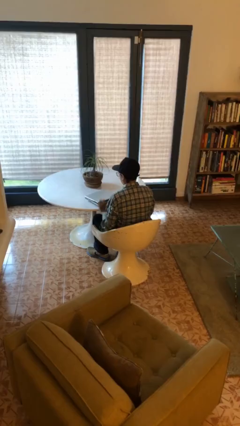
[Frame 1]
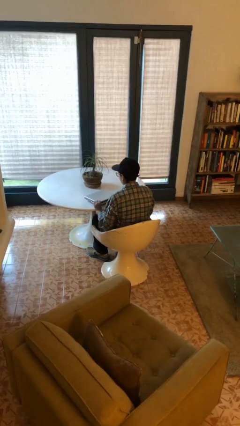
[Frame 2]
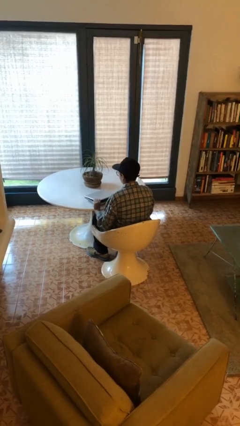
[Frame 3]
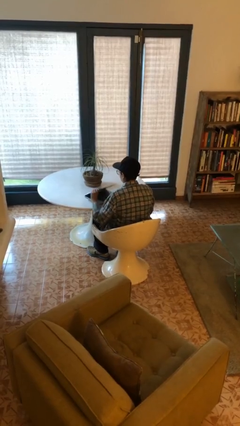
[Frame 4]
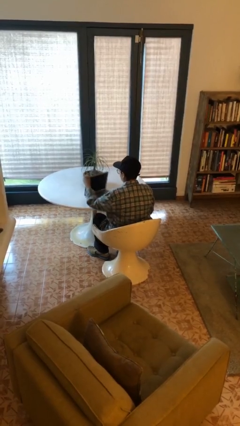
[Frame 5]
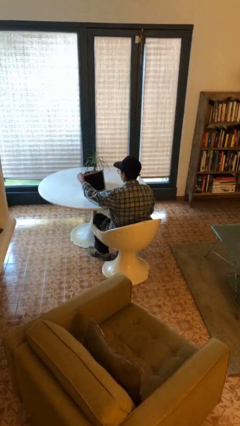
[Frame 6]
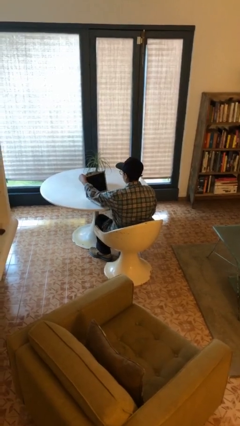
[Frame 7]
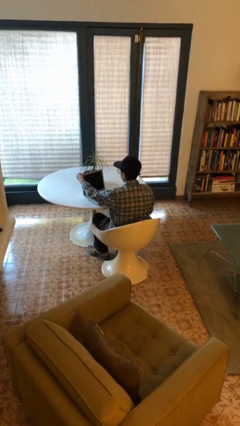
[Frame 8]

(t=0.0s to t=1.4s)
person opens laptop

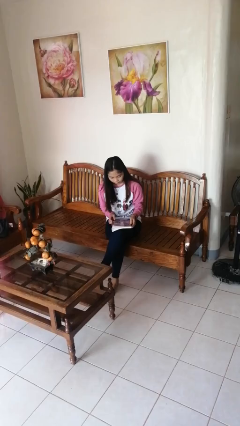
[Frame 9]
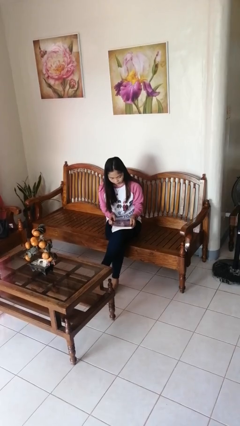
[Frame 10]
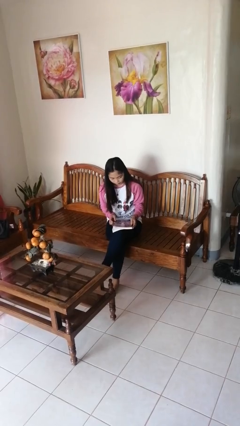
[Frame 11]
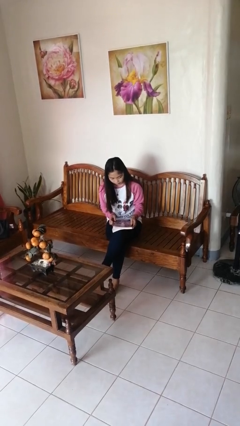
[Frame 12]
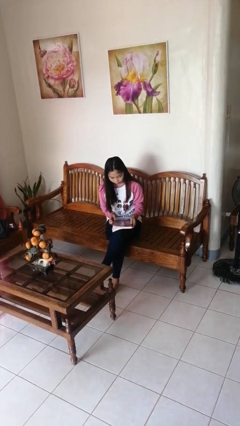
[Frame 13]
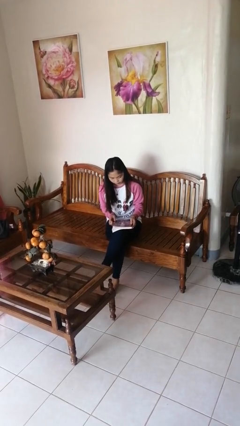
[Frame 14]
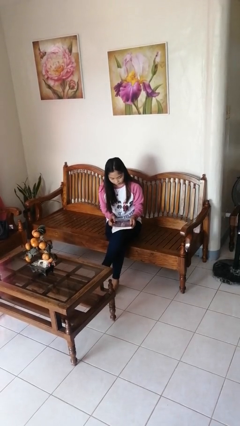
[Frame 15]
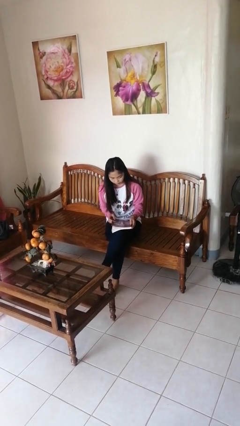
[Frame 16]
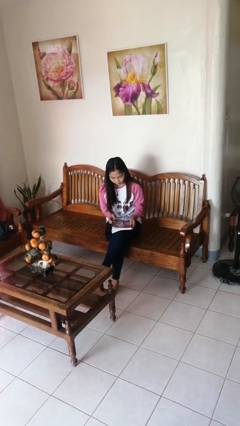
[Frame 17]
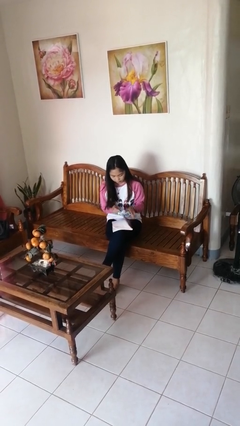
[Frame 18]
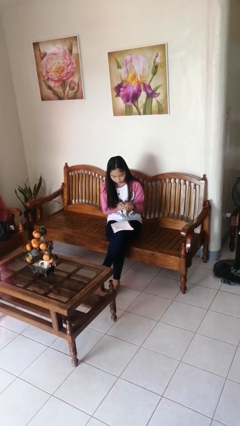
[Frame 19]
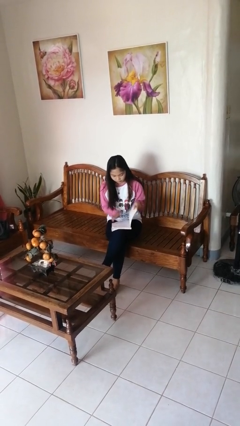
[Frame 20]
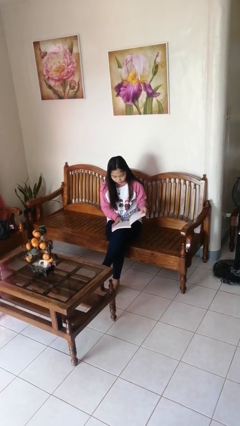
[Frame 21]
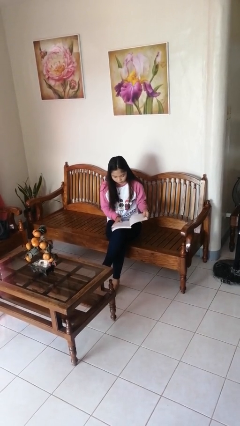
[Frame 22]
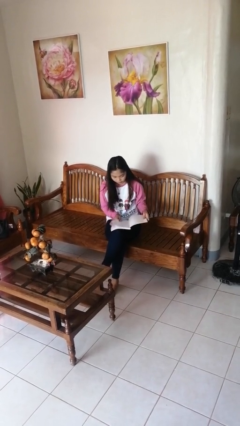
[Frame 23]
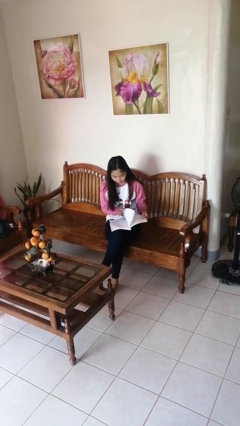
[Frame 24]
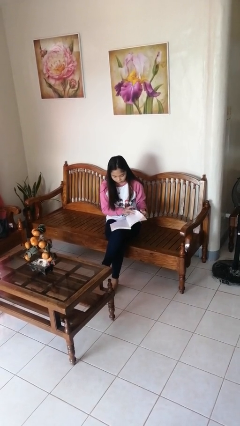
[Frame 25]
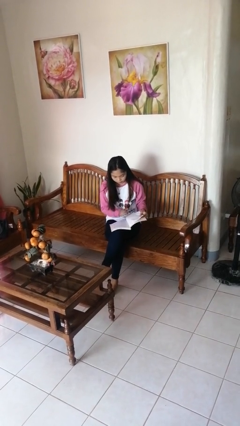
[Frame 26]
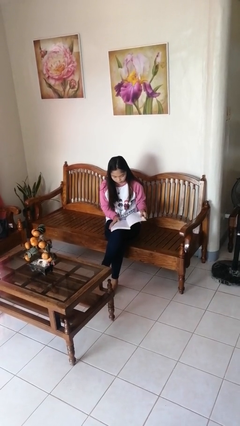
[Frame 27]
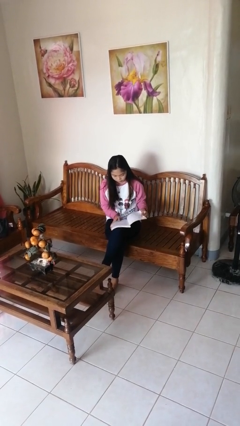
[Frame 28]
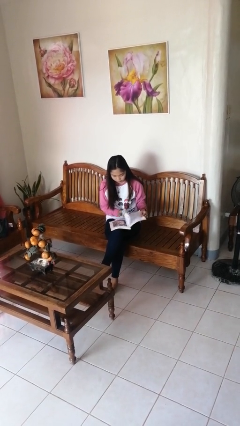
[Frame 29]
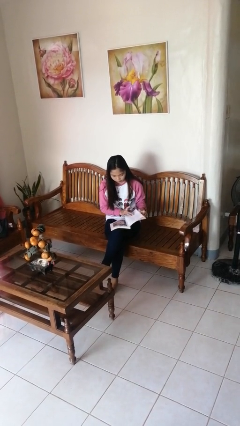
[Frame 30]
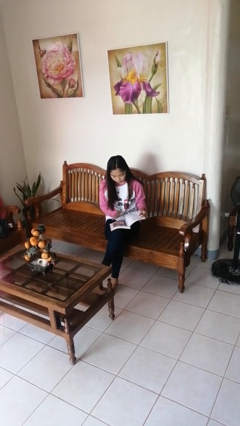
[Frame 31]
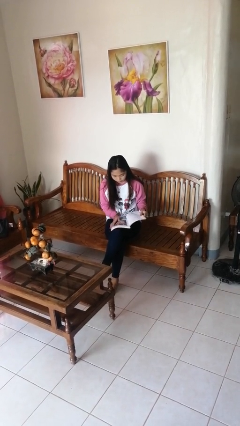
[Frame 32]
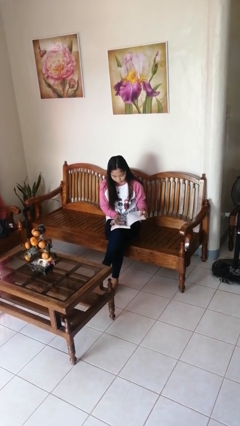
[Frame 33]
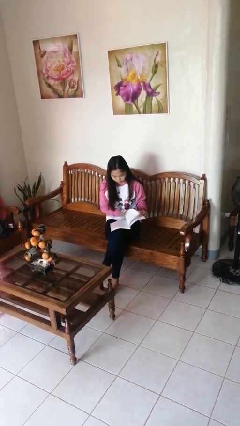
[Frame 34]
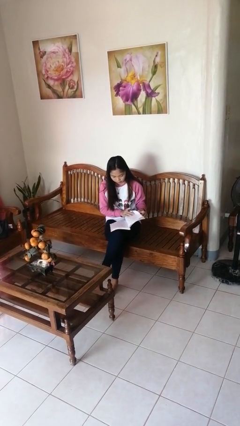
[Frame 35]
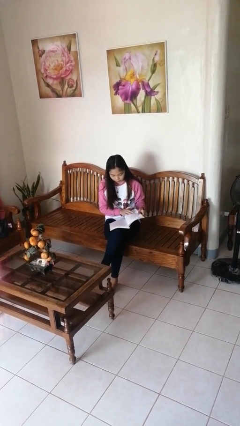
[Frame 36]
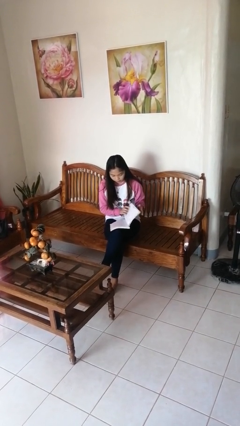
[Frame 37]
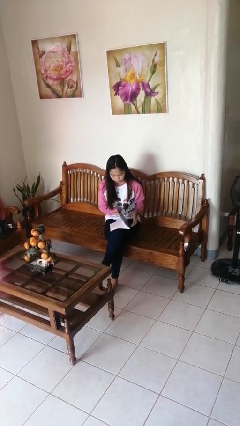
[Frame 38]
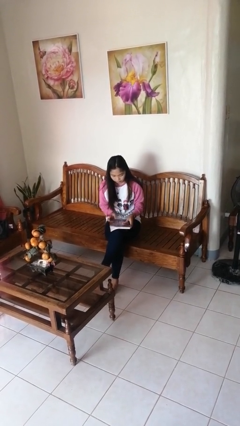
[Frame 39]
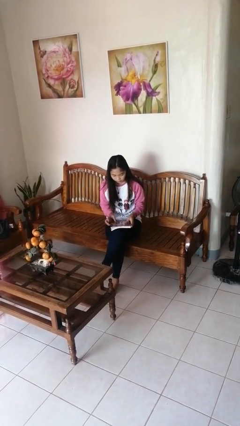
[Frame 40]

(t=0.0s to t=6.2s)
person reads book

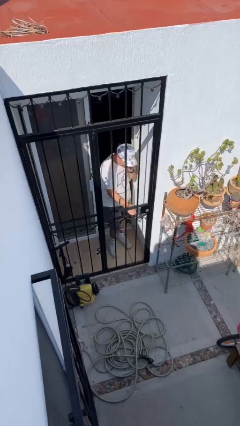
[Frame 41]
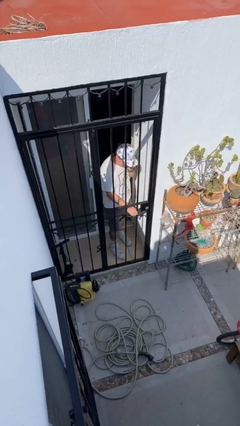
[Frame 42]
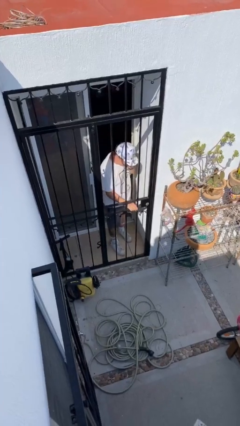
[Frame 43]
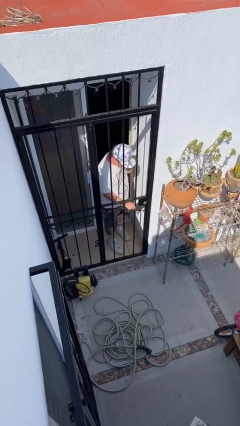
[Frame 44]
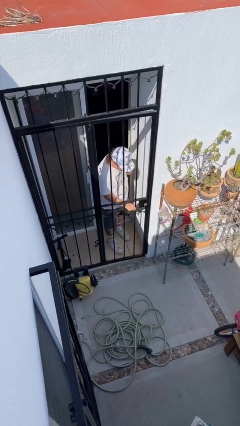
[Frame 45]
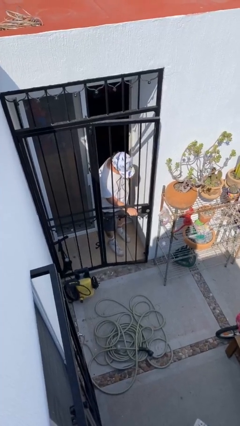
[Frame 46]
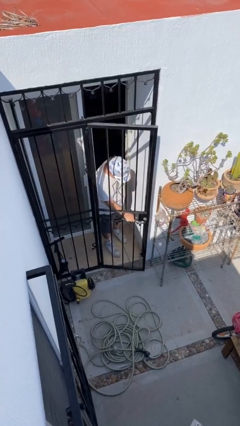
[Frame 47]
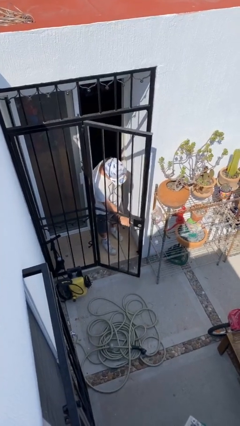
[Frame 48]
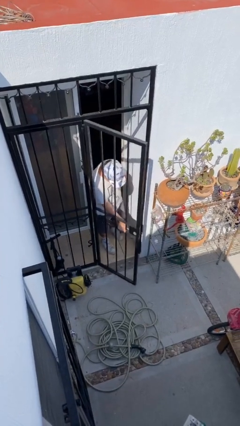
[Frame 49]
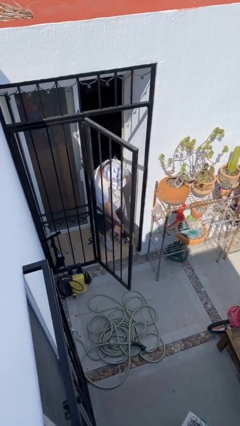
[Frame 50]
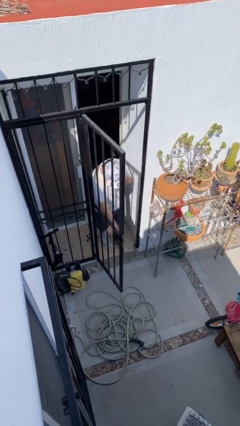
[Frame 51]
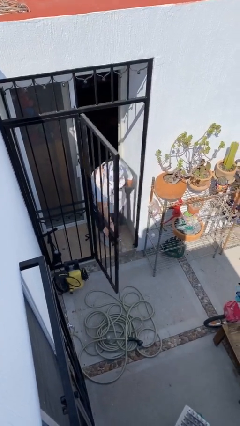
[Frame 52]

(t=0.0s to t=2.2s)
person opens facility door

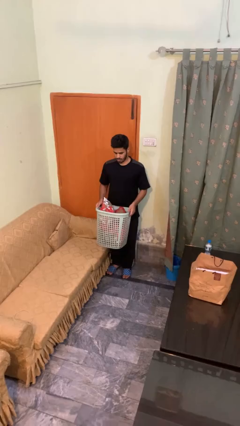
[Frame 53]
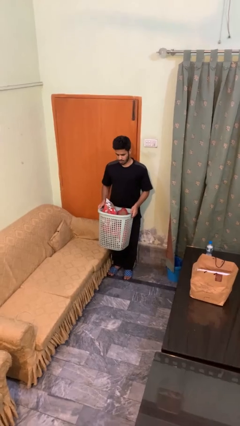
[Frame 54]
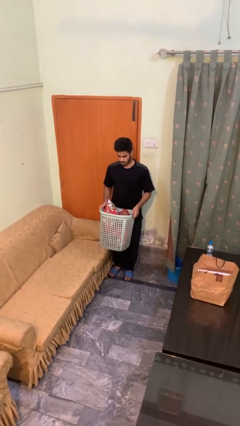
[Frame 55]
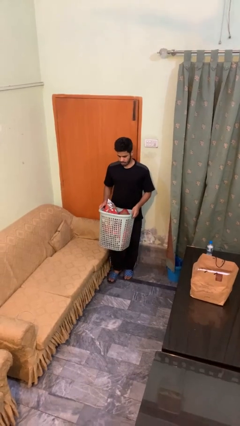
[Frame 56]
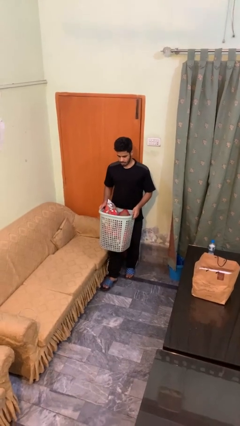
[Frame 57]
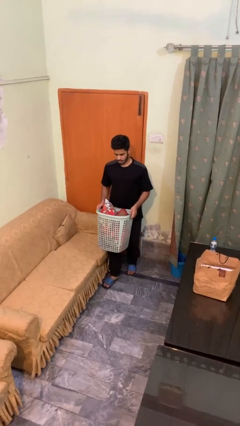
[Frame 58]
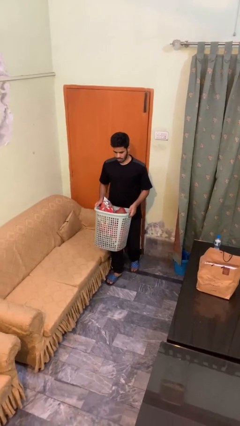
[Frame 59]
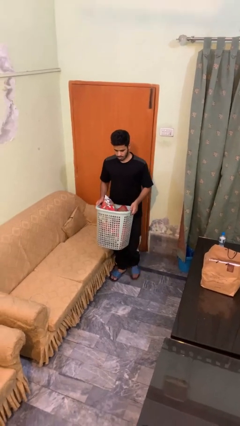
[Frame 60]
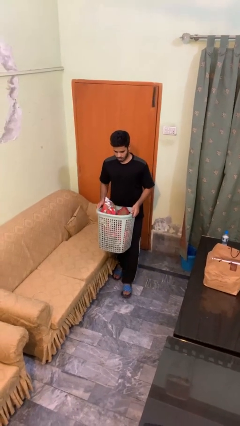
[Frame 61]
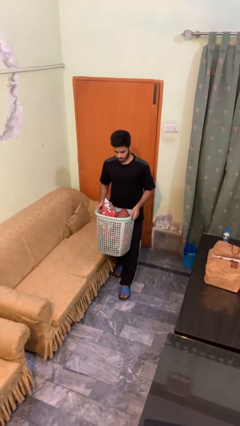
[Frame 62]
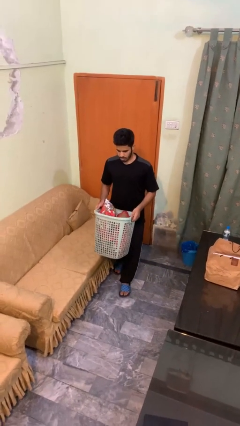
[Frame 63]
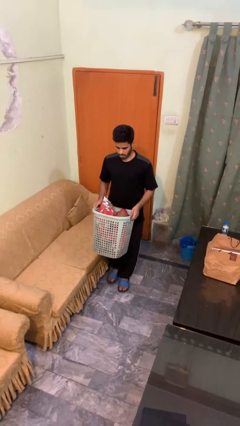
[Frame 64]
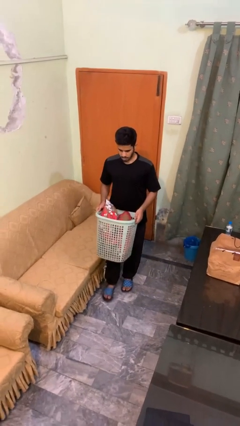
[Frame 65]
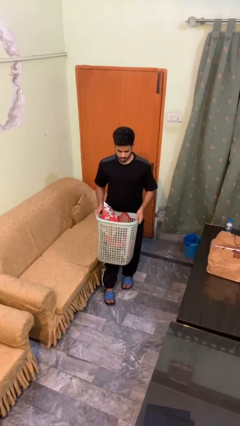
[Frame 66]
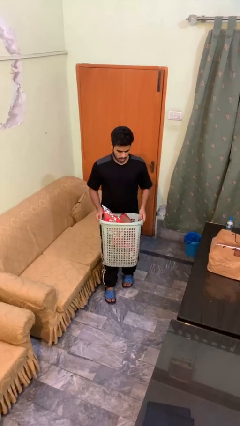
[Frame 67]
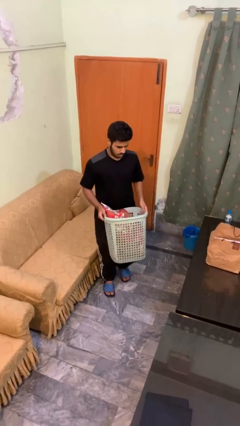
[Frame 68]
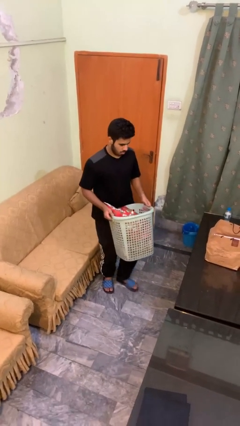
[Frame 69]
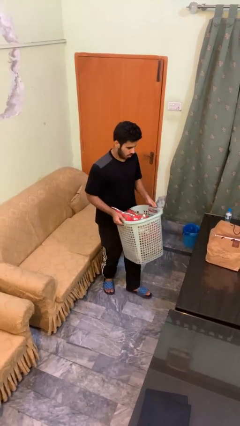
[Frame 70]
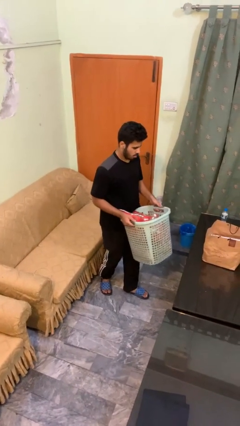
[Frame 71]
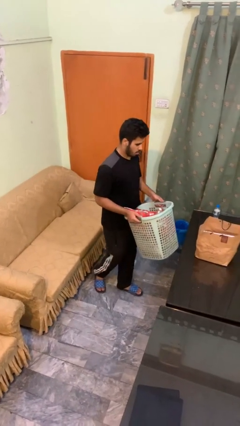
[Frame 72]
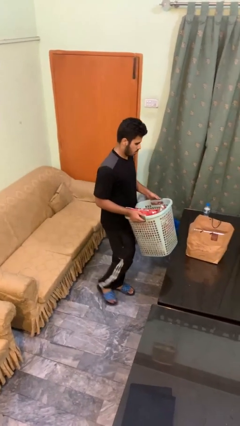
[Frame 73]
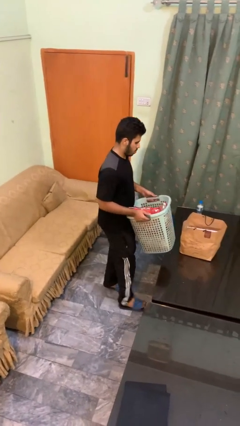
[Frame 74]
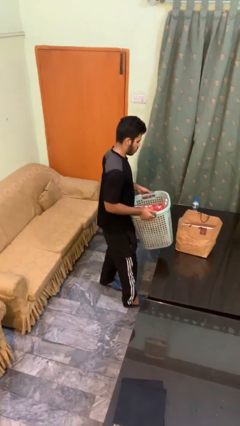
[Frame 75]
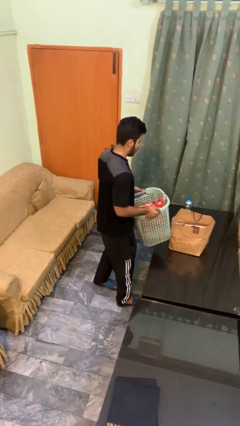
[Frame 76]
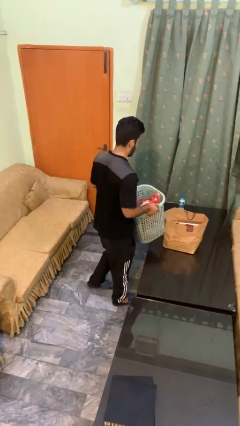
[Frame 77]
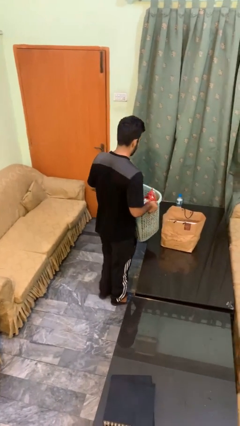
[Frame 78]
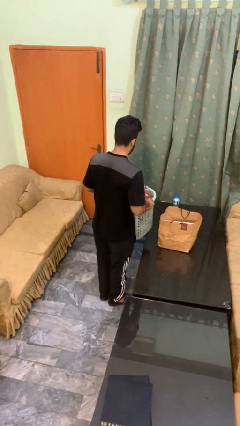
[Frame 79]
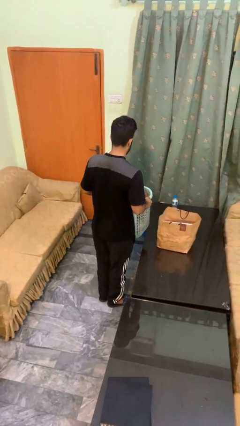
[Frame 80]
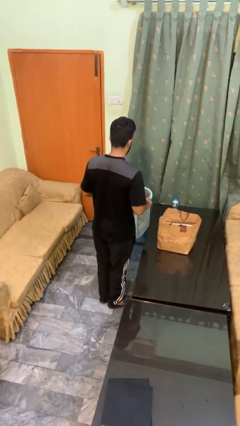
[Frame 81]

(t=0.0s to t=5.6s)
person carries laundry basket

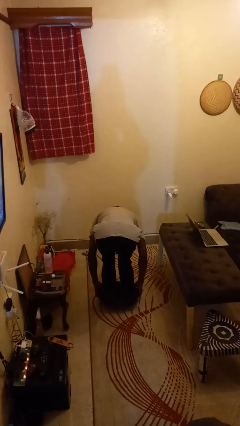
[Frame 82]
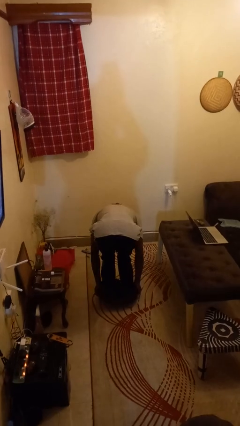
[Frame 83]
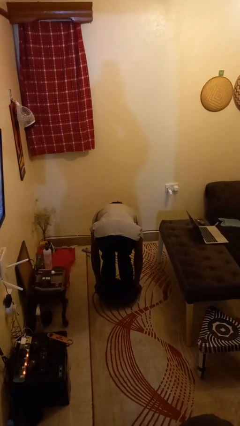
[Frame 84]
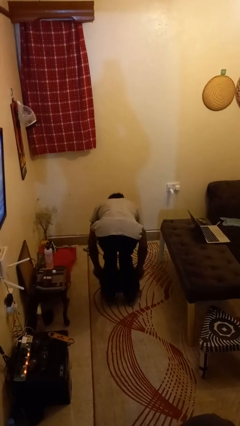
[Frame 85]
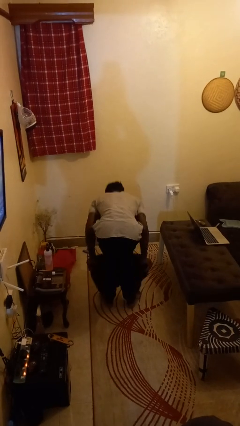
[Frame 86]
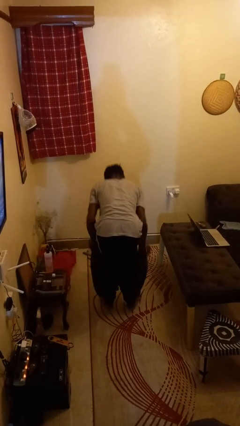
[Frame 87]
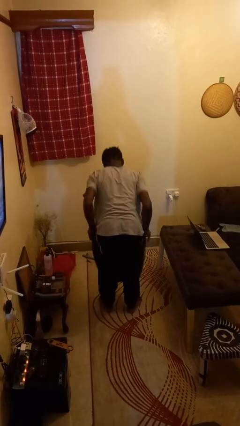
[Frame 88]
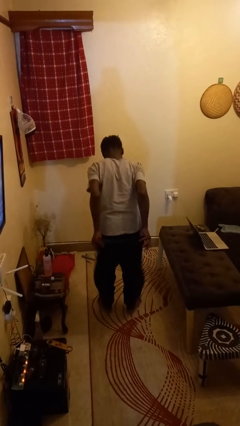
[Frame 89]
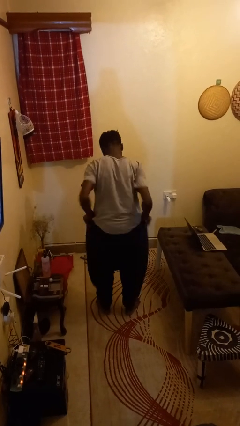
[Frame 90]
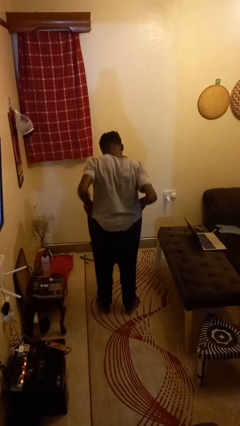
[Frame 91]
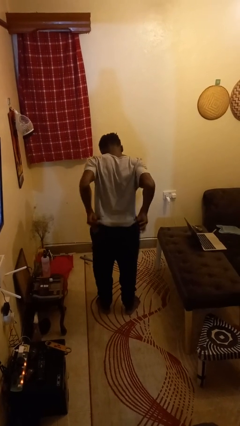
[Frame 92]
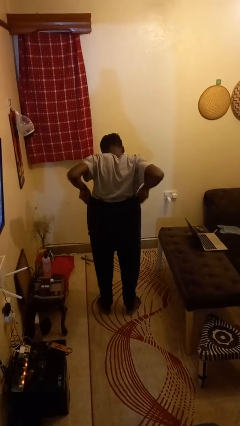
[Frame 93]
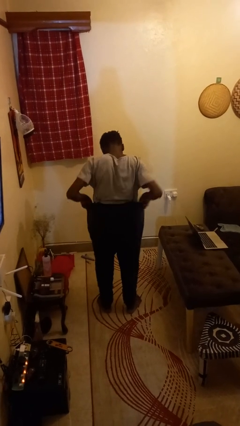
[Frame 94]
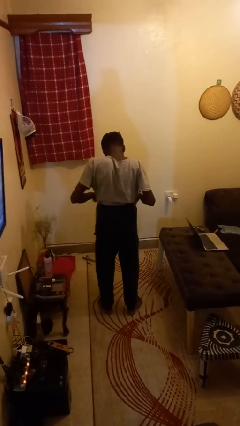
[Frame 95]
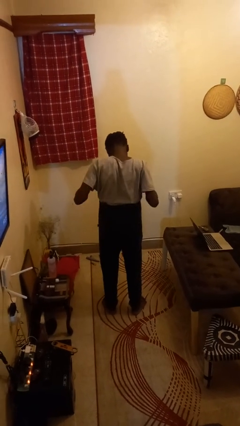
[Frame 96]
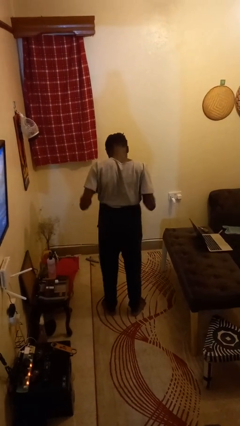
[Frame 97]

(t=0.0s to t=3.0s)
person puts on pants
